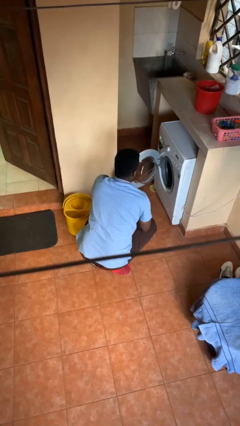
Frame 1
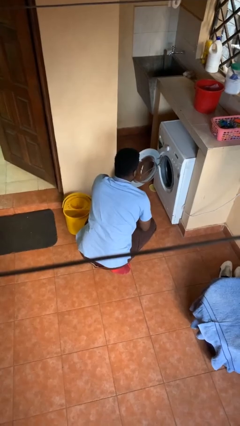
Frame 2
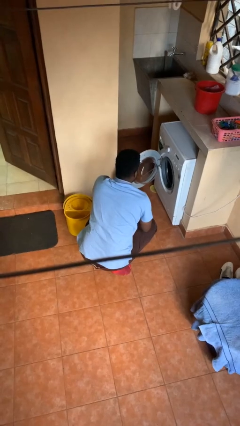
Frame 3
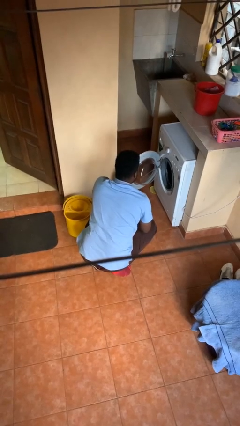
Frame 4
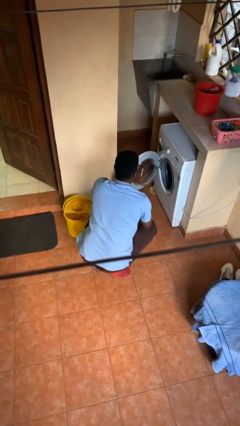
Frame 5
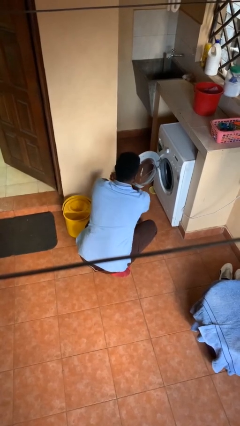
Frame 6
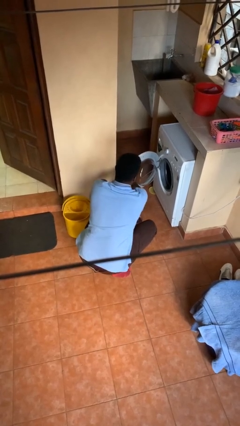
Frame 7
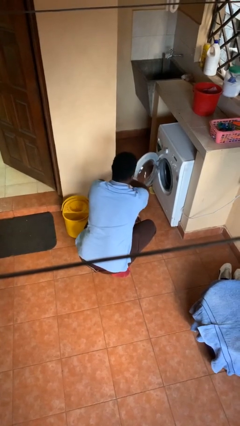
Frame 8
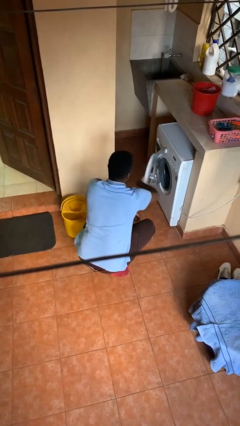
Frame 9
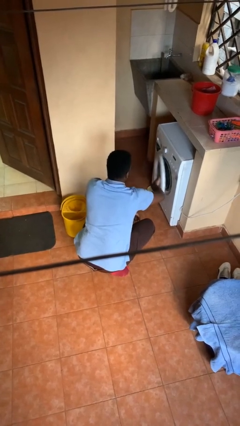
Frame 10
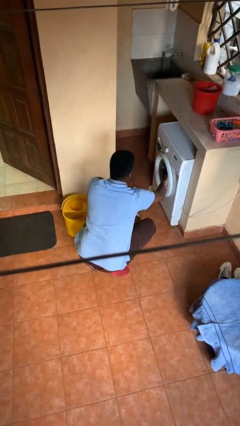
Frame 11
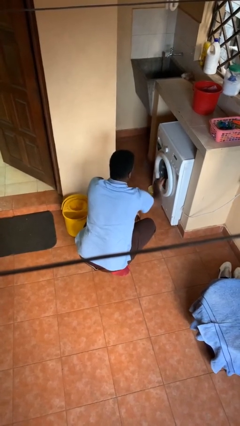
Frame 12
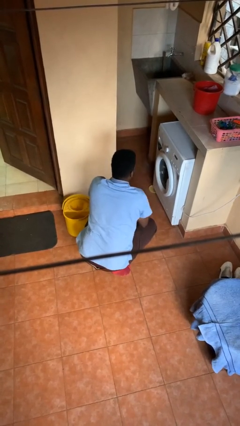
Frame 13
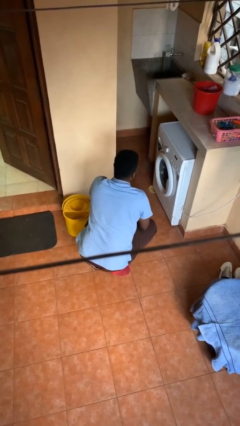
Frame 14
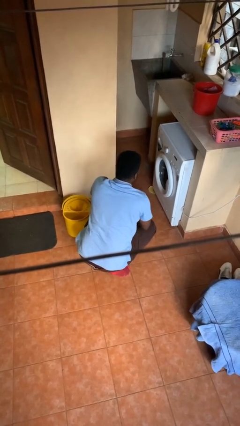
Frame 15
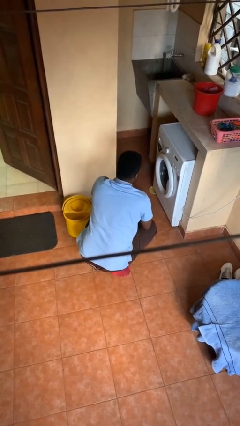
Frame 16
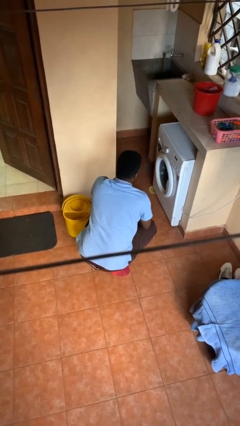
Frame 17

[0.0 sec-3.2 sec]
person closes clothes washer

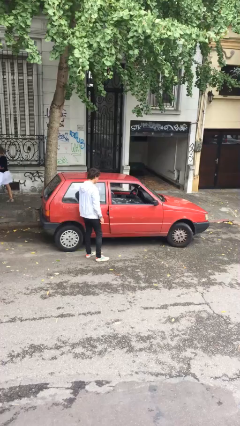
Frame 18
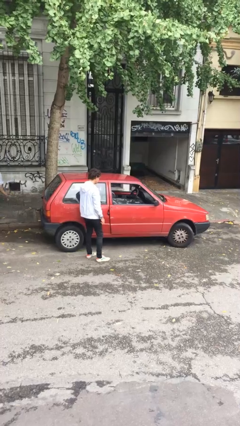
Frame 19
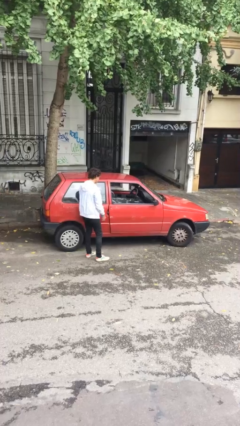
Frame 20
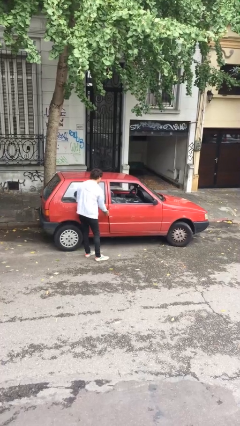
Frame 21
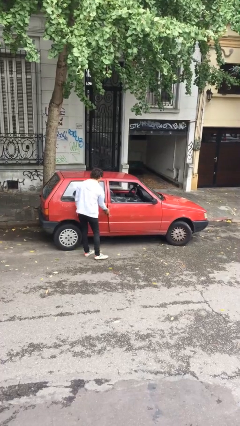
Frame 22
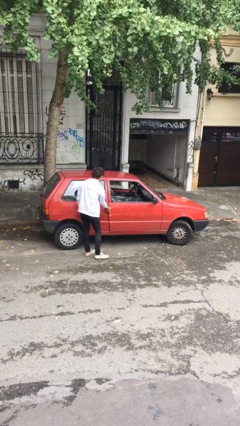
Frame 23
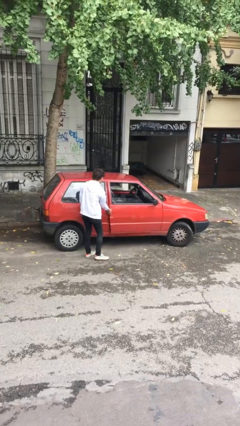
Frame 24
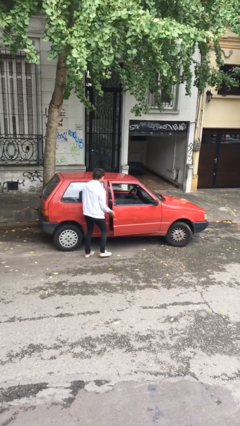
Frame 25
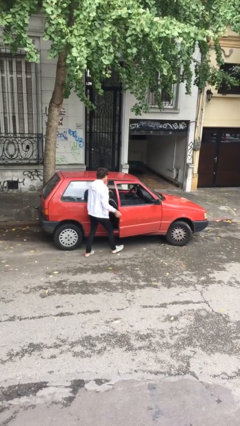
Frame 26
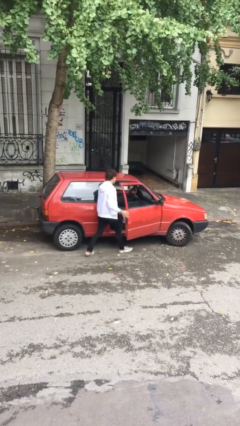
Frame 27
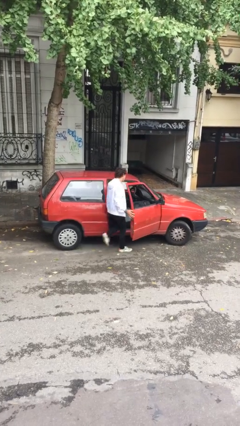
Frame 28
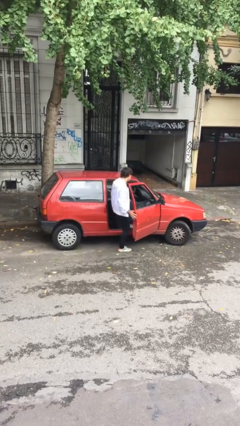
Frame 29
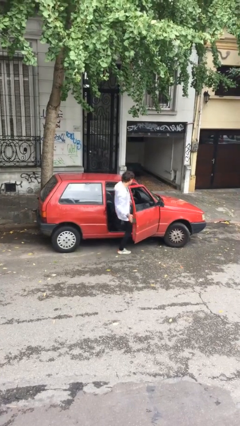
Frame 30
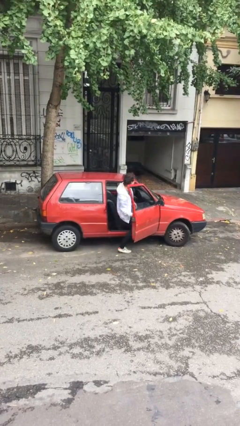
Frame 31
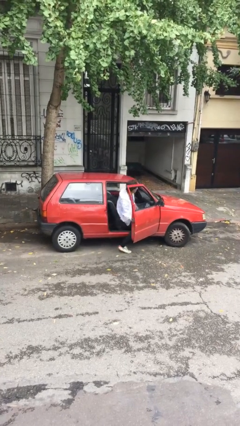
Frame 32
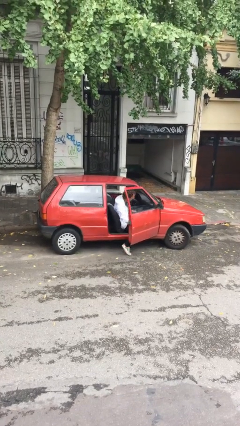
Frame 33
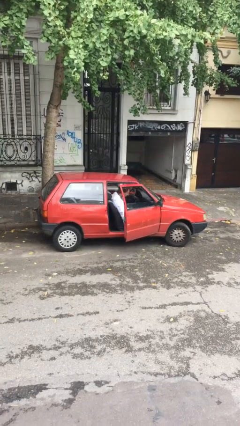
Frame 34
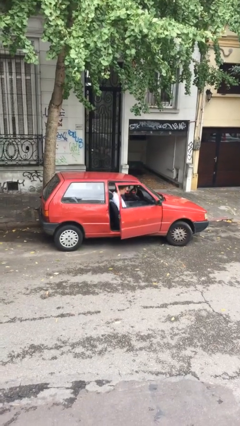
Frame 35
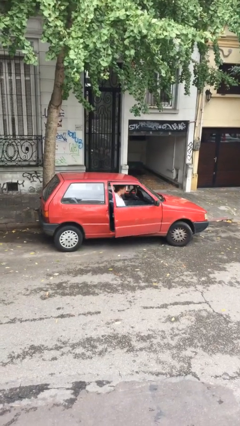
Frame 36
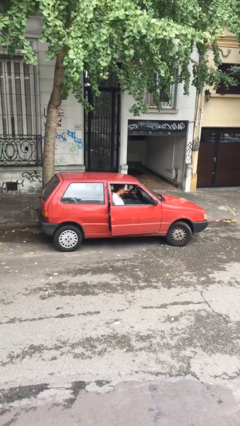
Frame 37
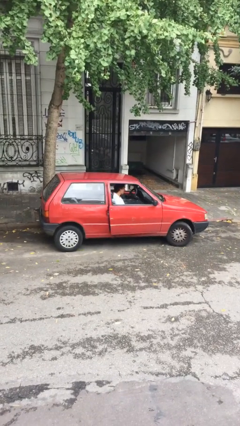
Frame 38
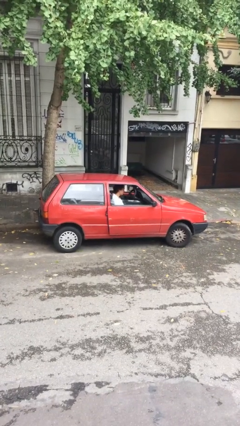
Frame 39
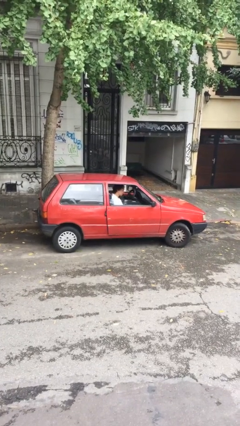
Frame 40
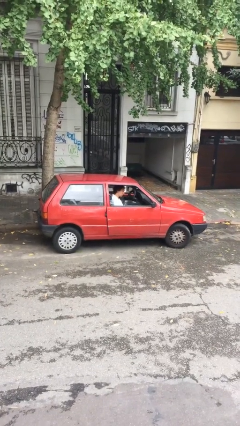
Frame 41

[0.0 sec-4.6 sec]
car picks up person

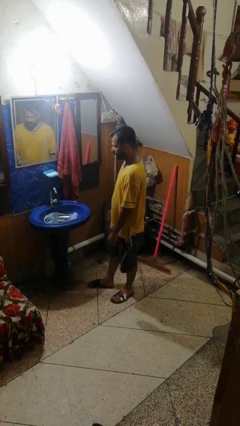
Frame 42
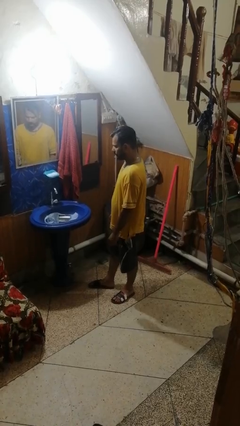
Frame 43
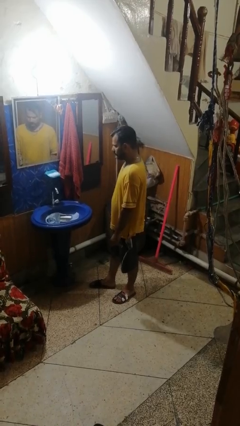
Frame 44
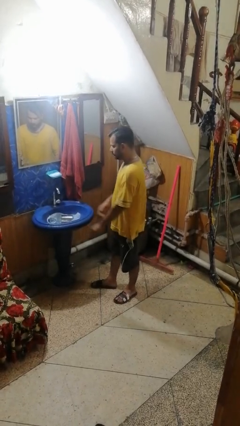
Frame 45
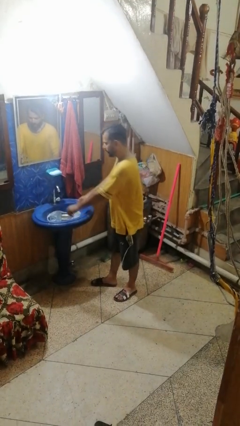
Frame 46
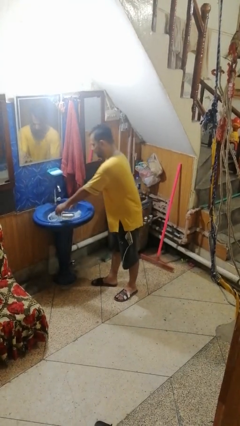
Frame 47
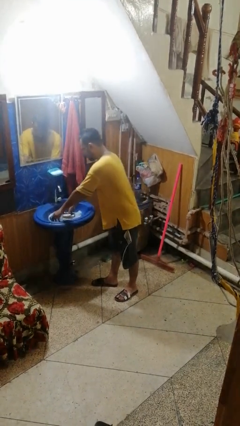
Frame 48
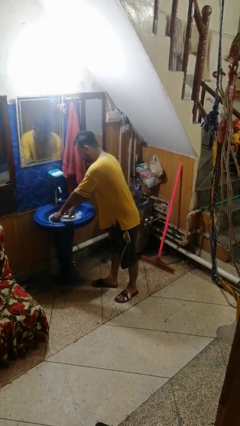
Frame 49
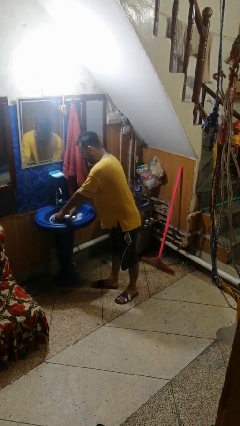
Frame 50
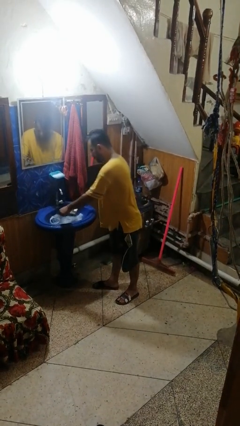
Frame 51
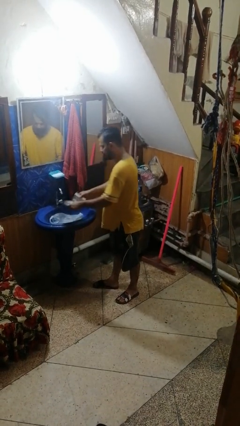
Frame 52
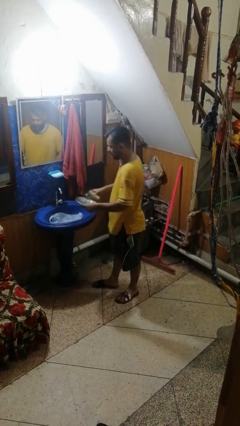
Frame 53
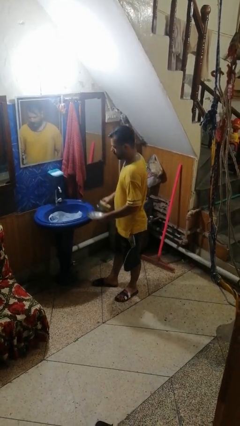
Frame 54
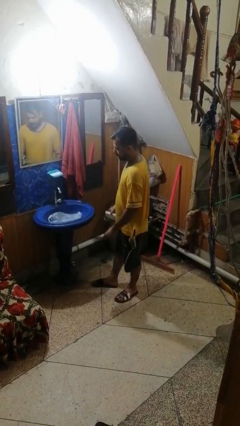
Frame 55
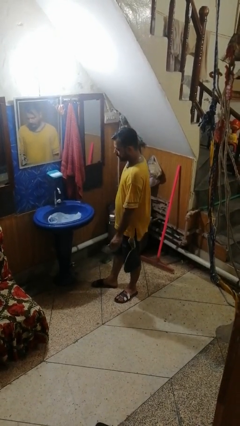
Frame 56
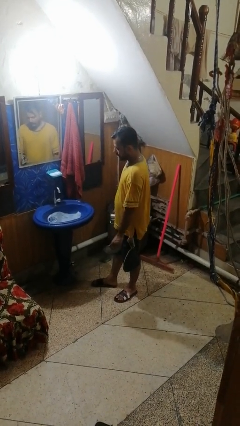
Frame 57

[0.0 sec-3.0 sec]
person unloads dishwasher

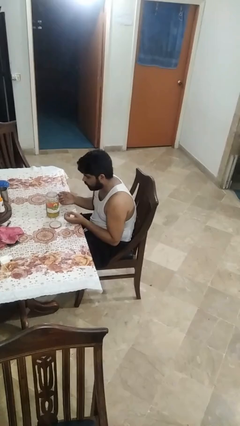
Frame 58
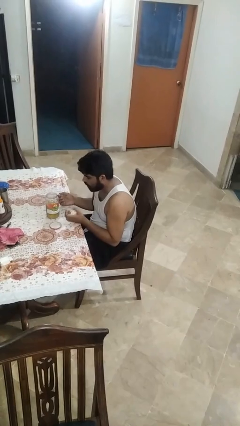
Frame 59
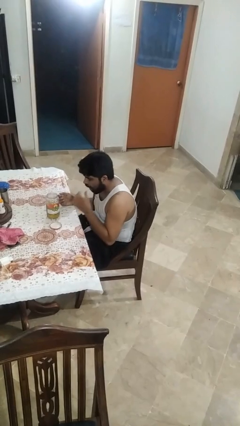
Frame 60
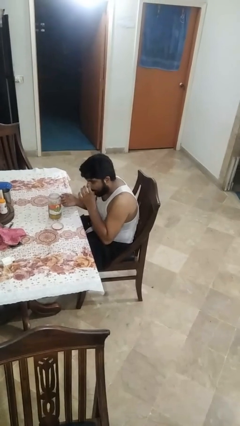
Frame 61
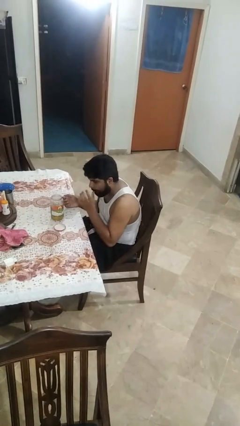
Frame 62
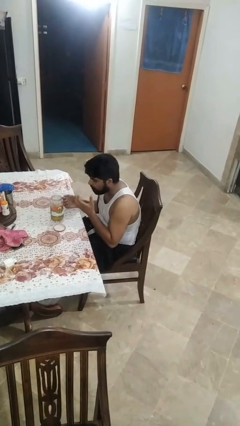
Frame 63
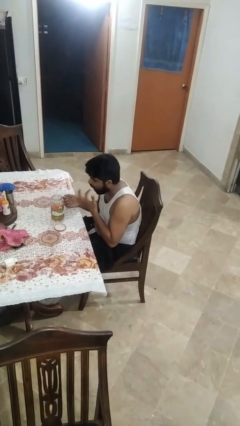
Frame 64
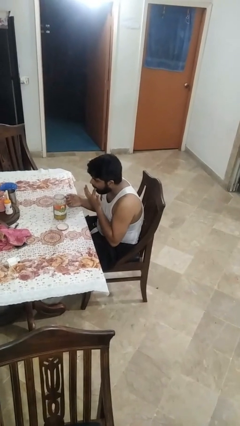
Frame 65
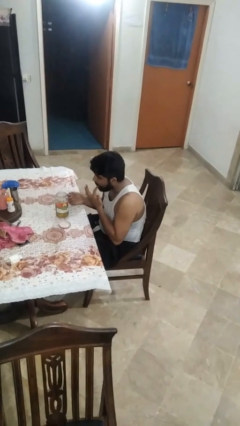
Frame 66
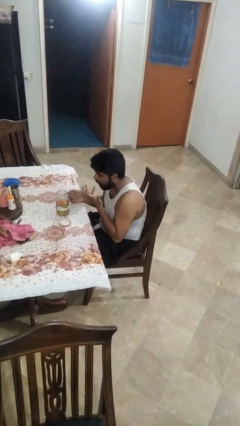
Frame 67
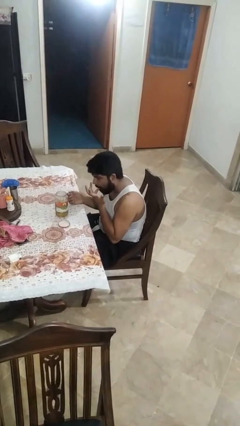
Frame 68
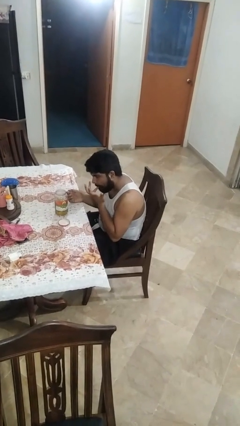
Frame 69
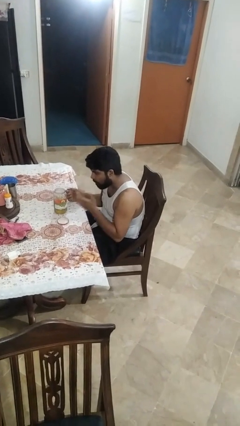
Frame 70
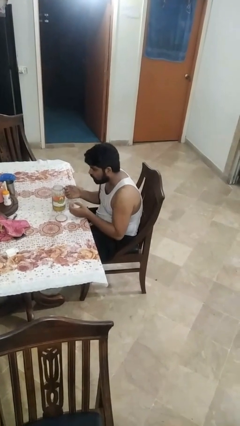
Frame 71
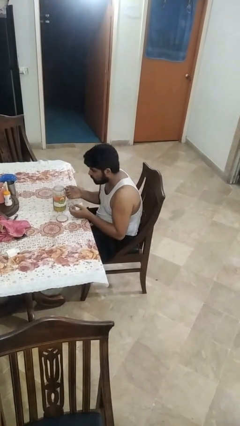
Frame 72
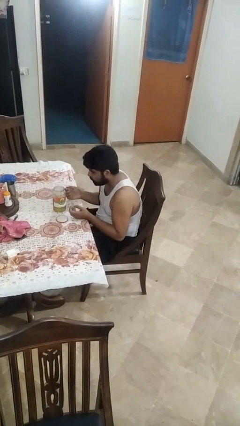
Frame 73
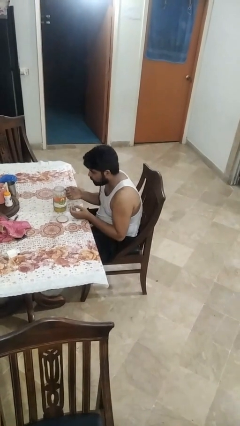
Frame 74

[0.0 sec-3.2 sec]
person licks fingers

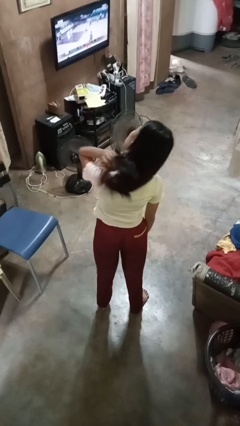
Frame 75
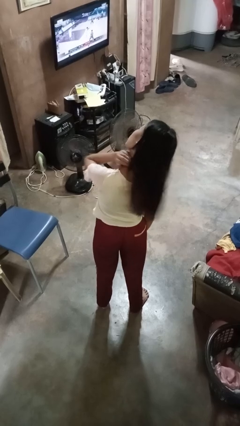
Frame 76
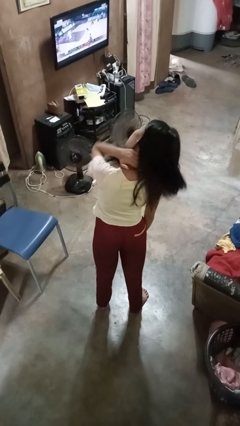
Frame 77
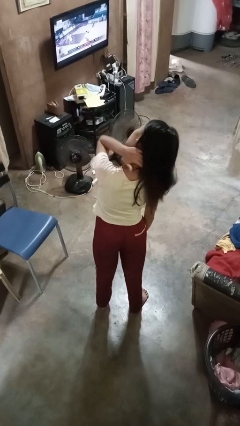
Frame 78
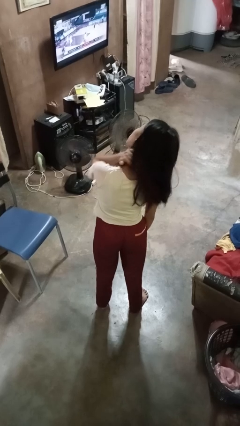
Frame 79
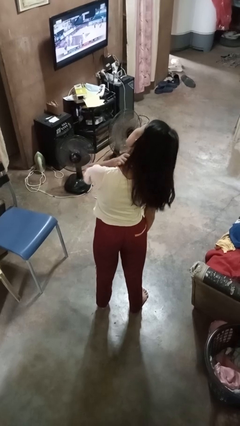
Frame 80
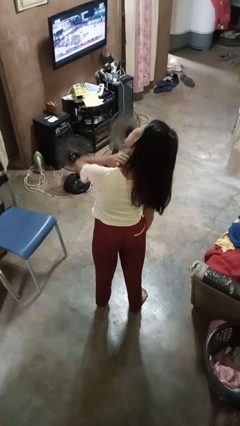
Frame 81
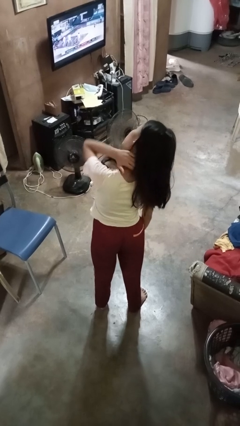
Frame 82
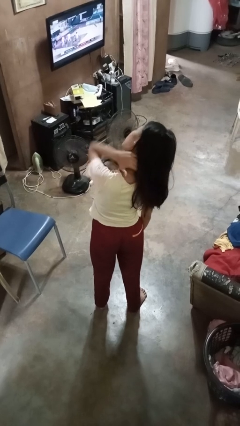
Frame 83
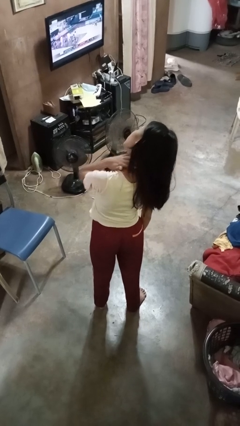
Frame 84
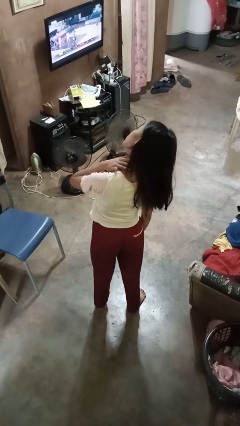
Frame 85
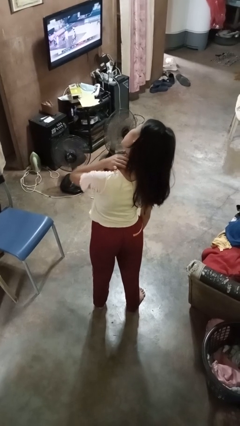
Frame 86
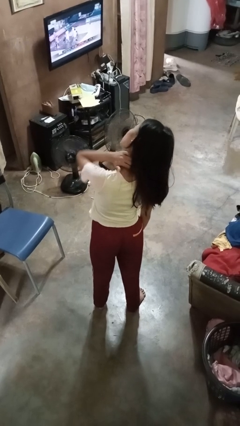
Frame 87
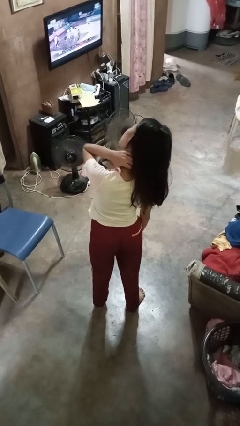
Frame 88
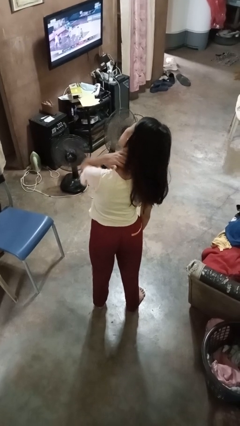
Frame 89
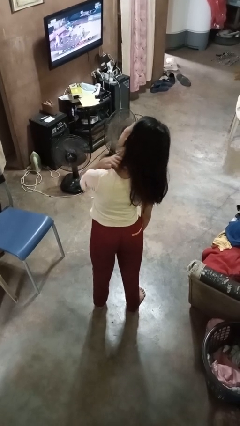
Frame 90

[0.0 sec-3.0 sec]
person rubs neck

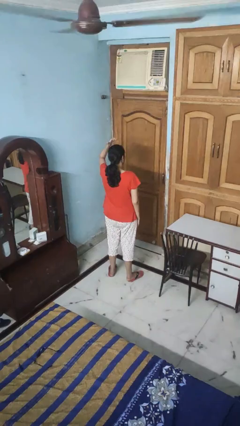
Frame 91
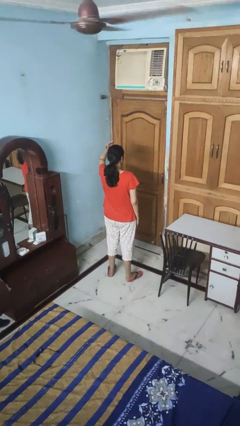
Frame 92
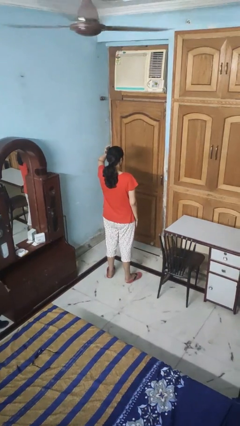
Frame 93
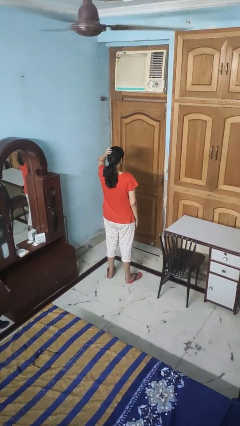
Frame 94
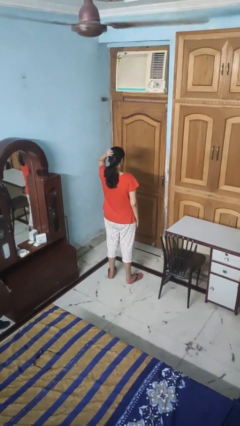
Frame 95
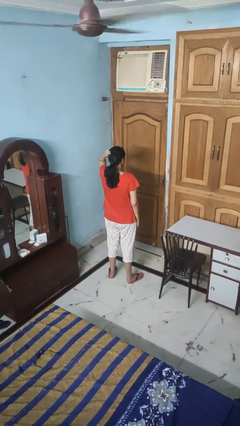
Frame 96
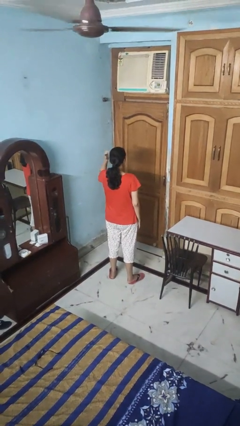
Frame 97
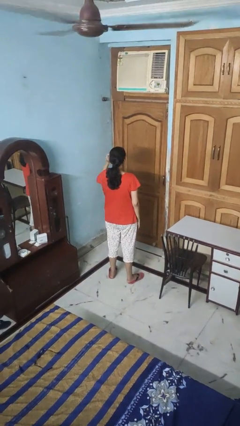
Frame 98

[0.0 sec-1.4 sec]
person pats head
